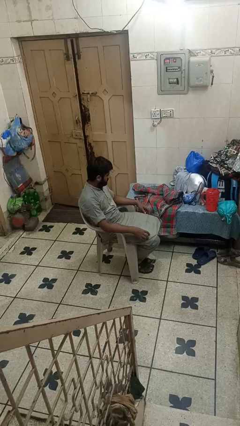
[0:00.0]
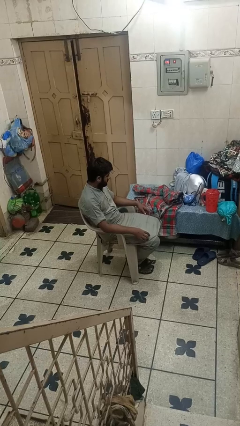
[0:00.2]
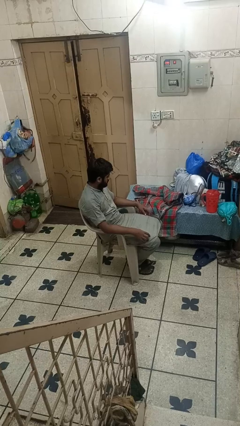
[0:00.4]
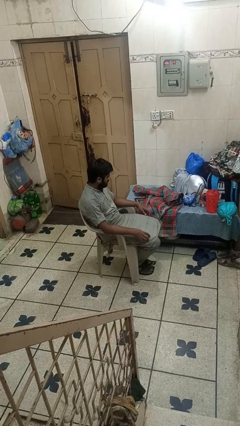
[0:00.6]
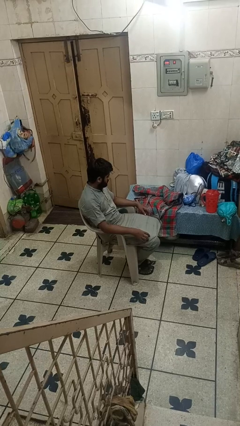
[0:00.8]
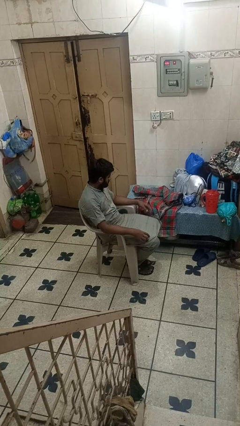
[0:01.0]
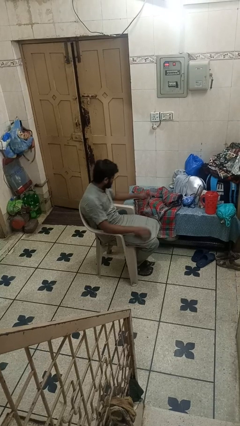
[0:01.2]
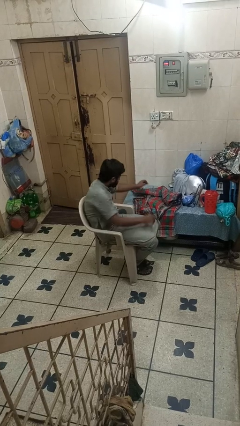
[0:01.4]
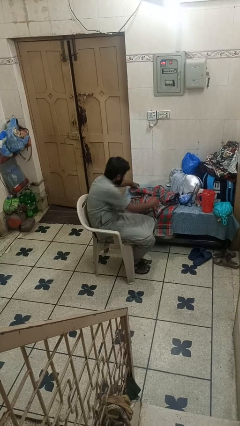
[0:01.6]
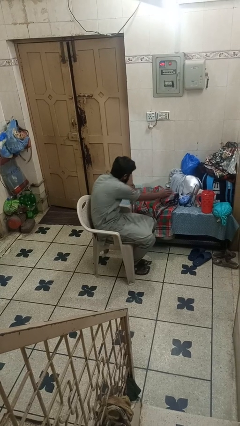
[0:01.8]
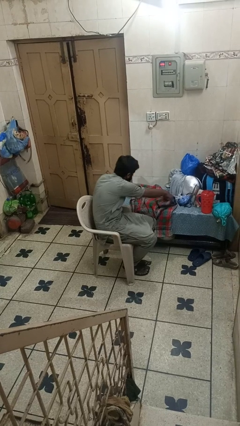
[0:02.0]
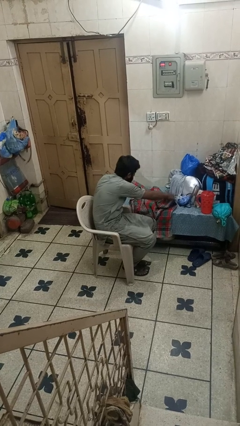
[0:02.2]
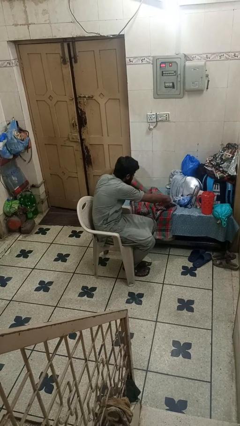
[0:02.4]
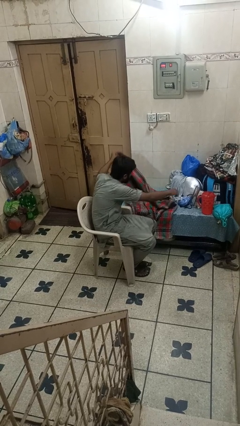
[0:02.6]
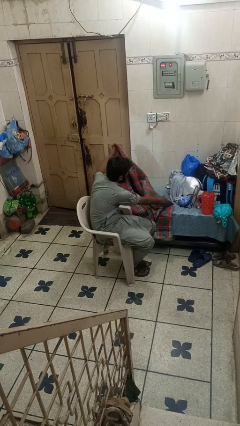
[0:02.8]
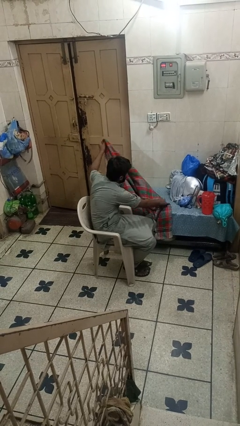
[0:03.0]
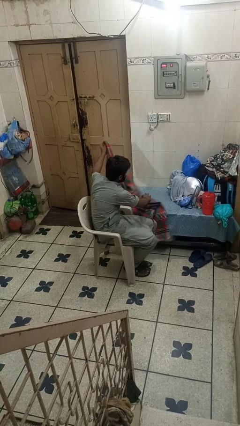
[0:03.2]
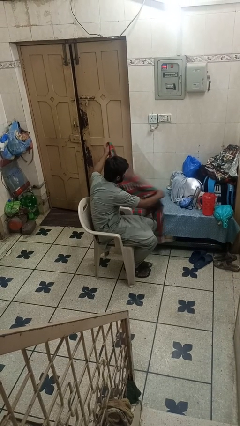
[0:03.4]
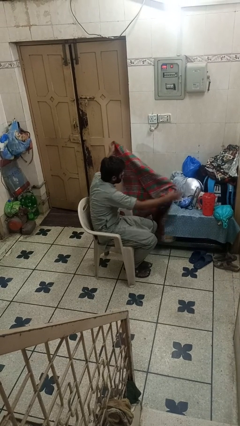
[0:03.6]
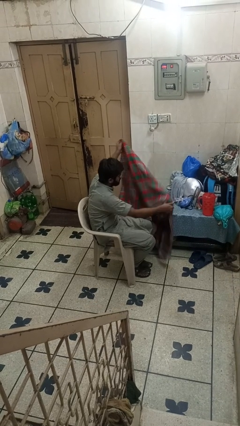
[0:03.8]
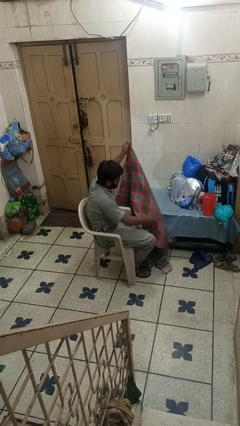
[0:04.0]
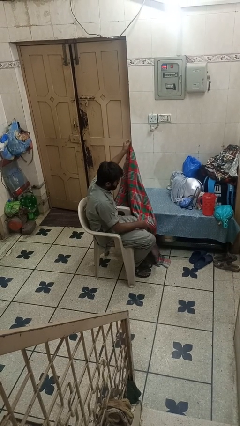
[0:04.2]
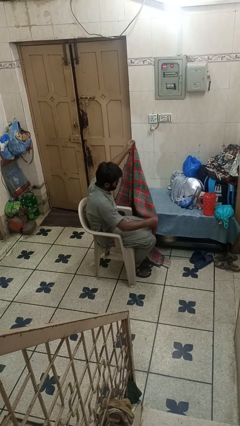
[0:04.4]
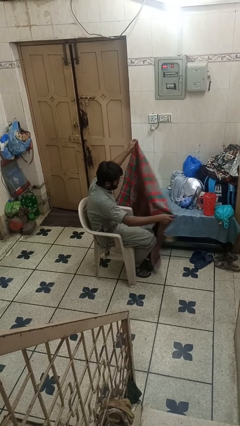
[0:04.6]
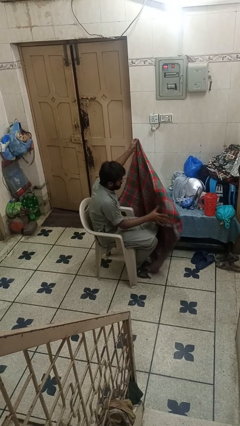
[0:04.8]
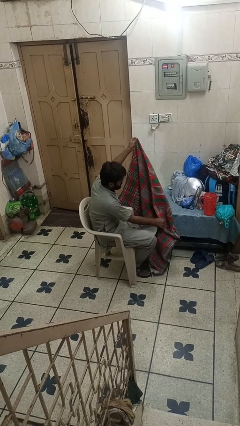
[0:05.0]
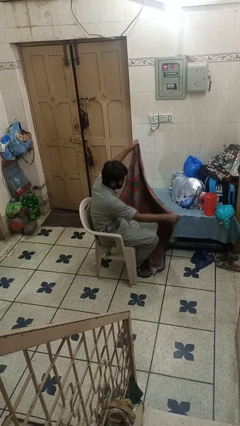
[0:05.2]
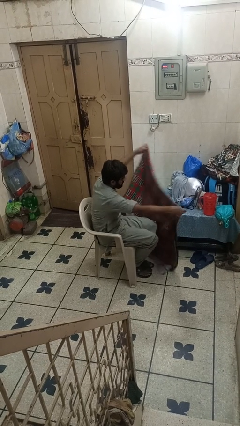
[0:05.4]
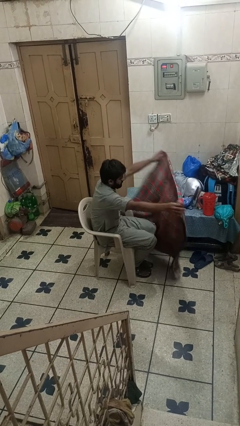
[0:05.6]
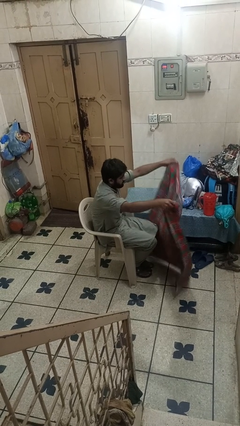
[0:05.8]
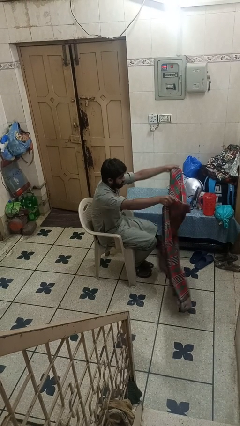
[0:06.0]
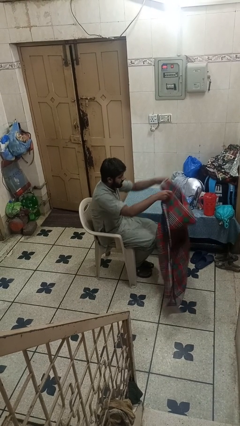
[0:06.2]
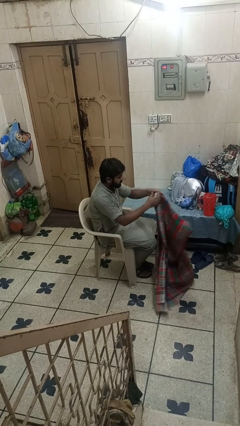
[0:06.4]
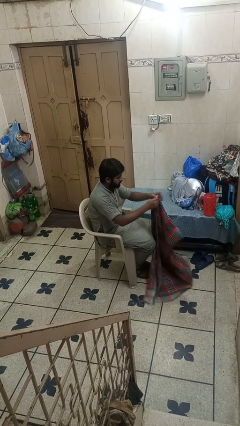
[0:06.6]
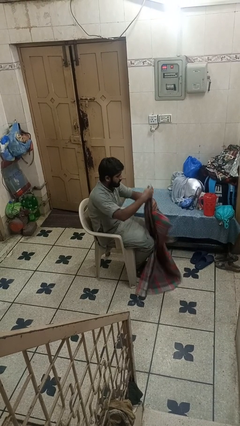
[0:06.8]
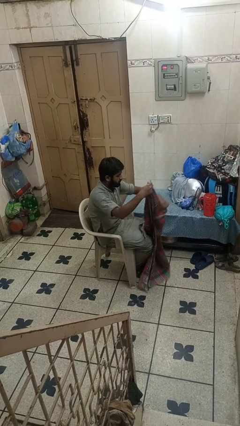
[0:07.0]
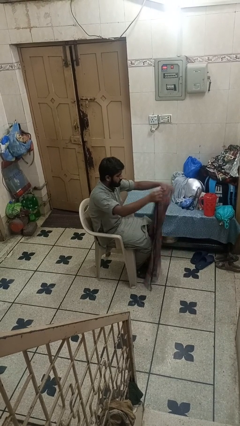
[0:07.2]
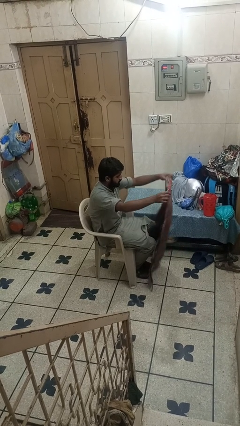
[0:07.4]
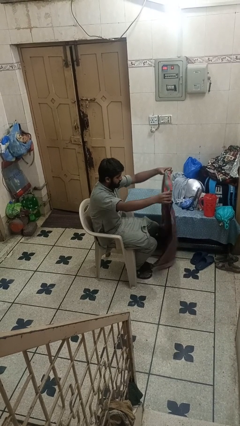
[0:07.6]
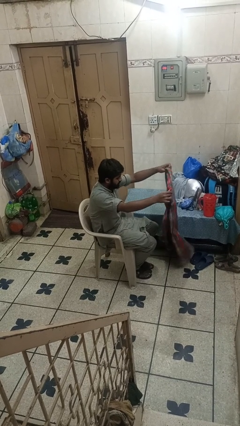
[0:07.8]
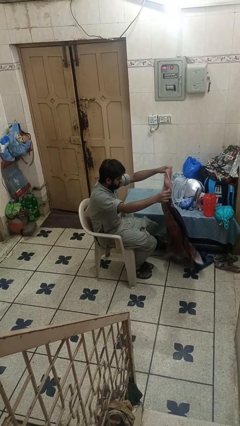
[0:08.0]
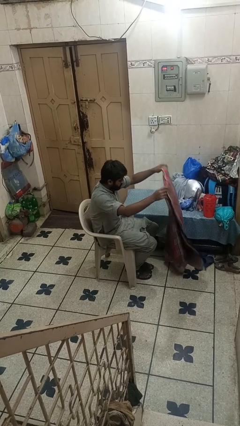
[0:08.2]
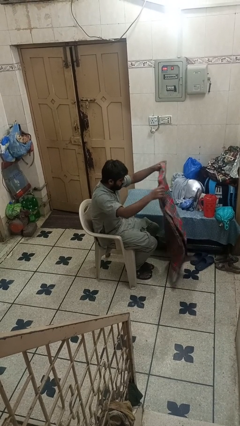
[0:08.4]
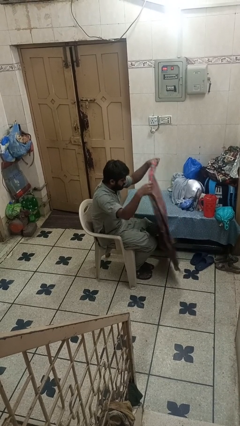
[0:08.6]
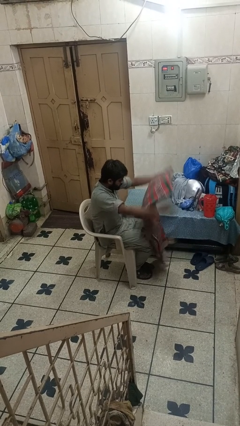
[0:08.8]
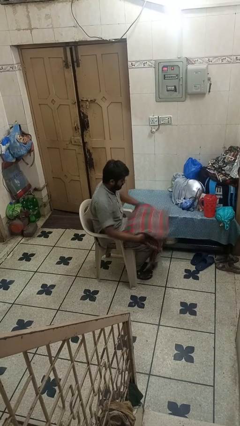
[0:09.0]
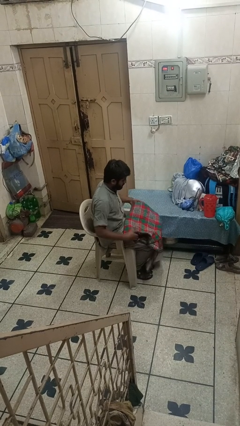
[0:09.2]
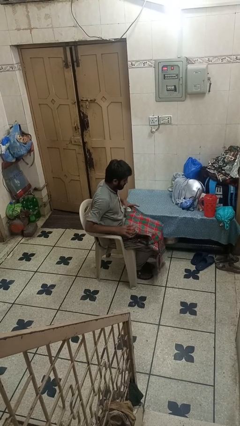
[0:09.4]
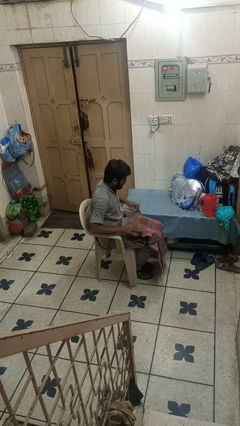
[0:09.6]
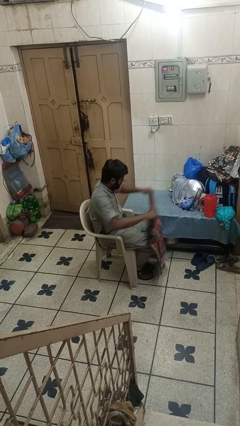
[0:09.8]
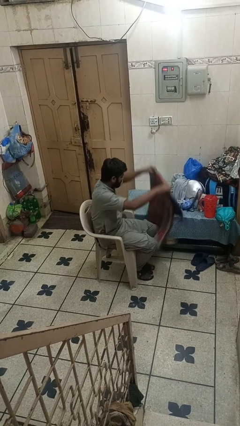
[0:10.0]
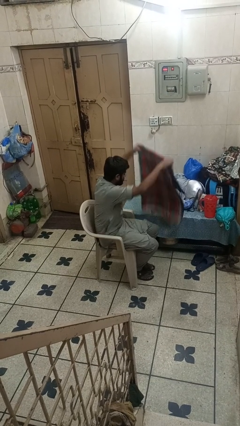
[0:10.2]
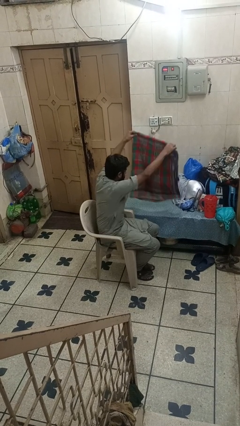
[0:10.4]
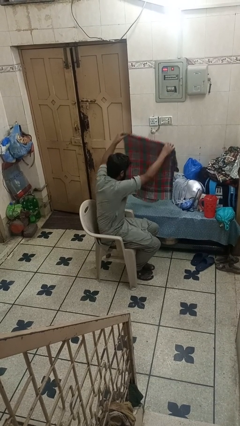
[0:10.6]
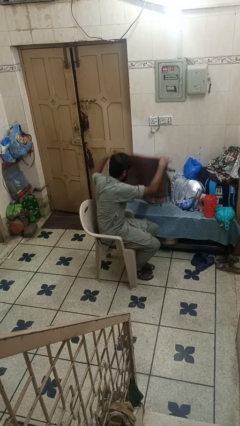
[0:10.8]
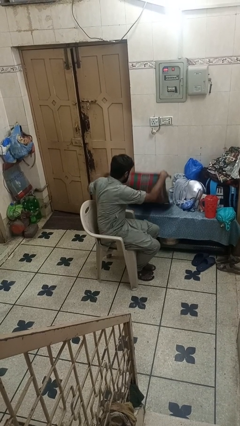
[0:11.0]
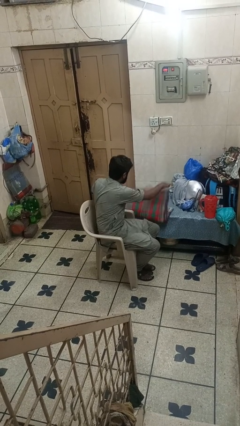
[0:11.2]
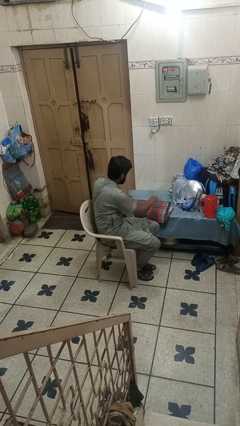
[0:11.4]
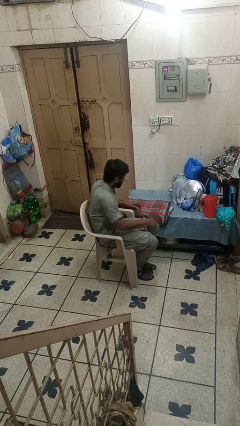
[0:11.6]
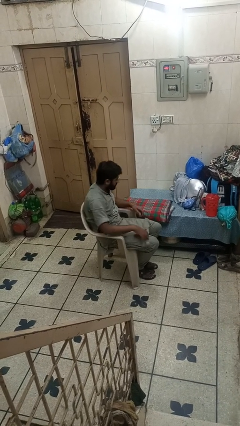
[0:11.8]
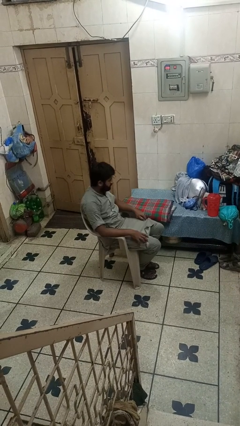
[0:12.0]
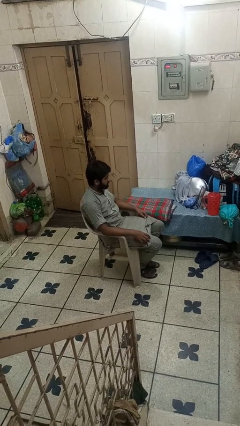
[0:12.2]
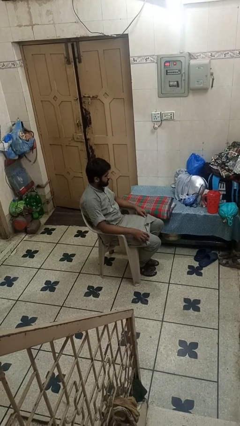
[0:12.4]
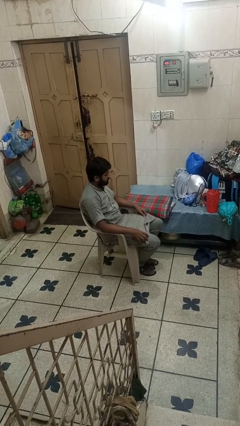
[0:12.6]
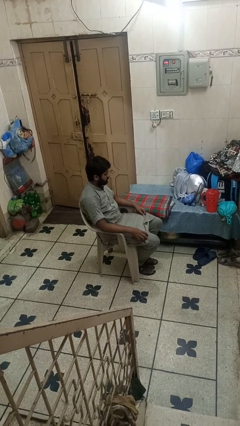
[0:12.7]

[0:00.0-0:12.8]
person folds blanket

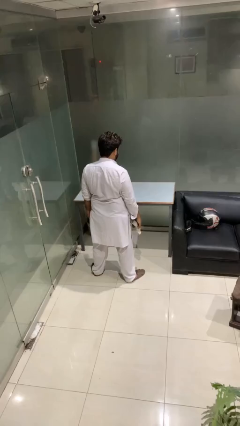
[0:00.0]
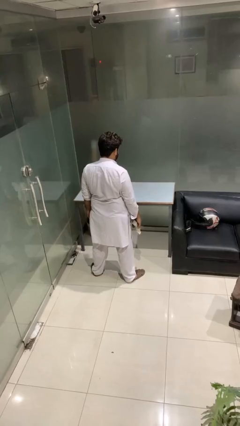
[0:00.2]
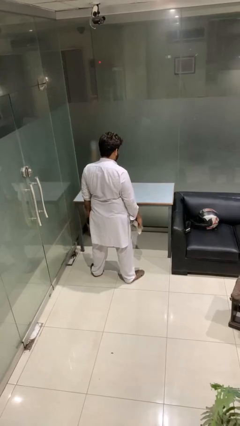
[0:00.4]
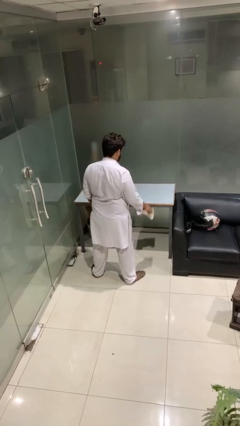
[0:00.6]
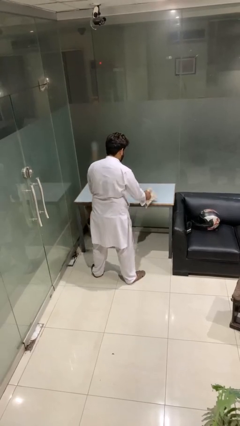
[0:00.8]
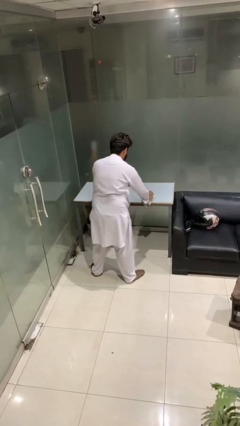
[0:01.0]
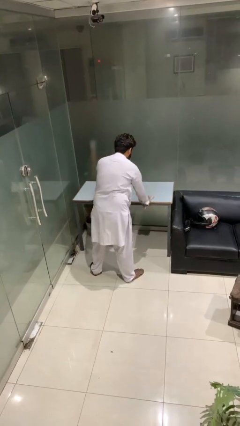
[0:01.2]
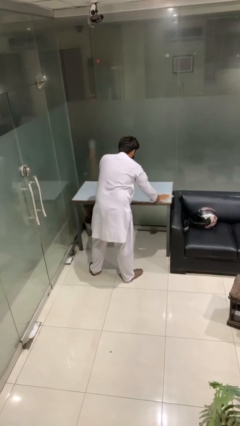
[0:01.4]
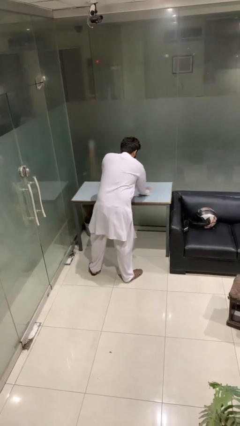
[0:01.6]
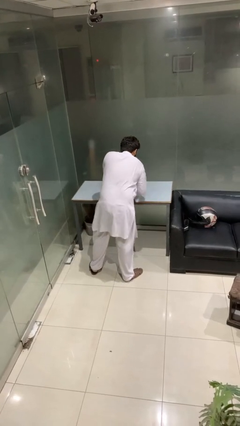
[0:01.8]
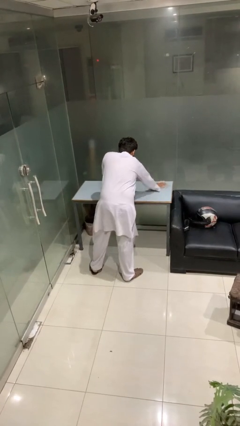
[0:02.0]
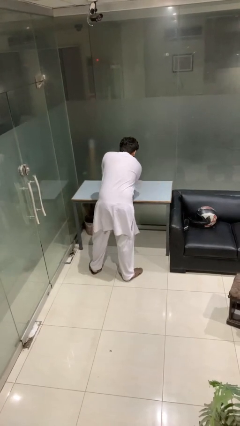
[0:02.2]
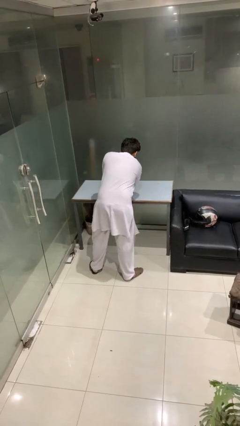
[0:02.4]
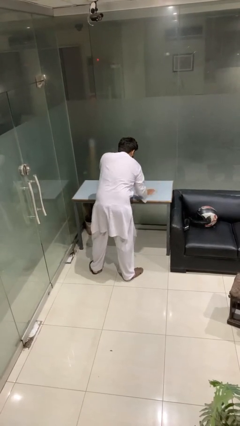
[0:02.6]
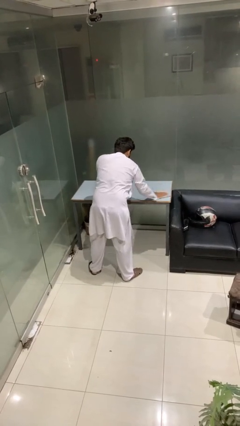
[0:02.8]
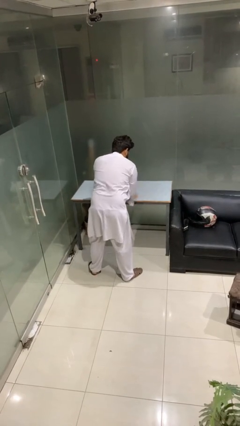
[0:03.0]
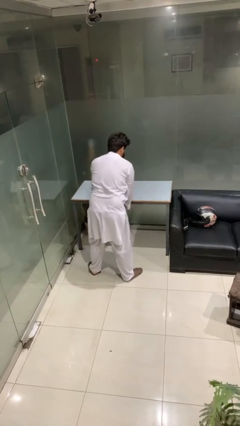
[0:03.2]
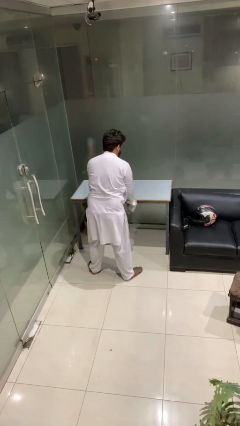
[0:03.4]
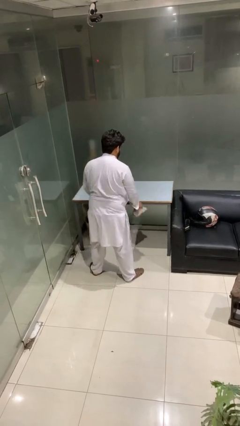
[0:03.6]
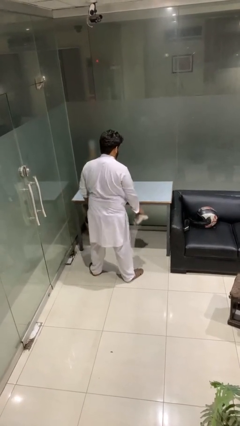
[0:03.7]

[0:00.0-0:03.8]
person cleans table with rag

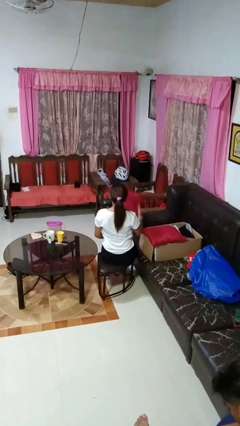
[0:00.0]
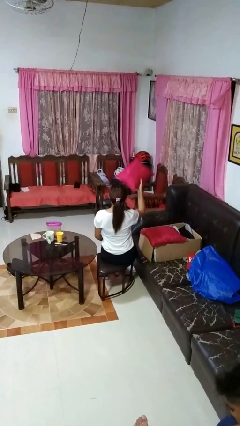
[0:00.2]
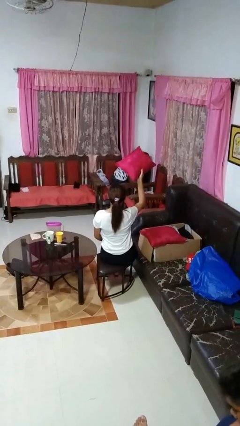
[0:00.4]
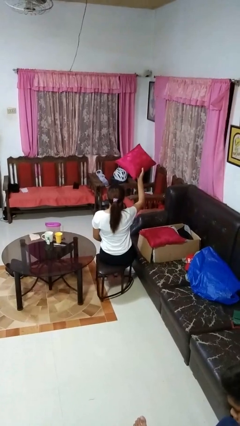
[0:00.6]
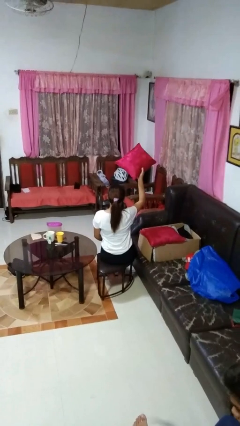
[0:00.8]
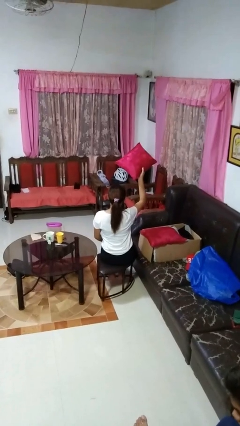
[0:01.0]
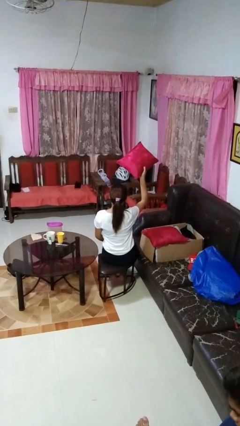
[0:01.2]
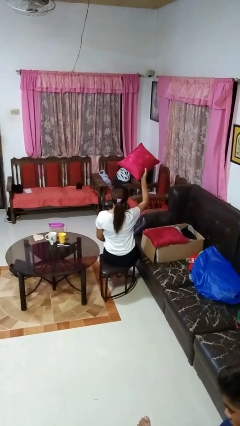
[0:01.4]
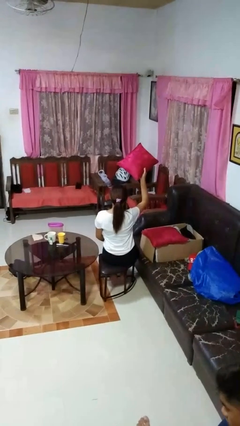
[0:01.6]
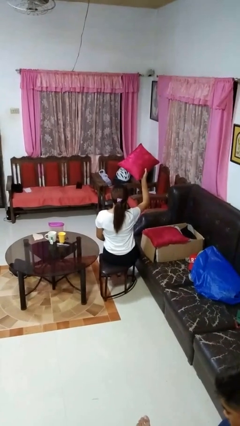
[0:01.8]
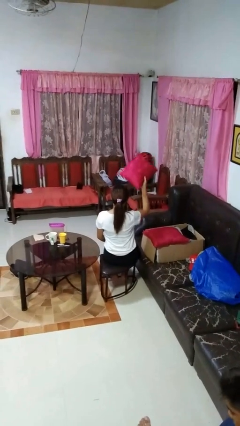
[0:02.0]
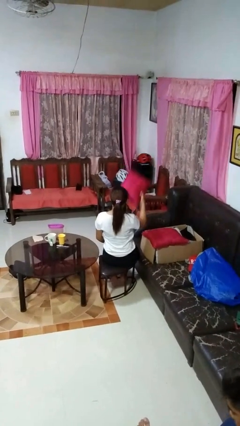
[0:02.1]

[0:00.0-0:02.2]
person holds object above head
